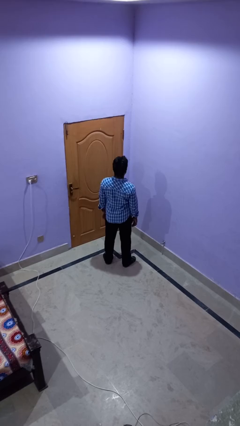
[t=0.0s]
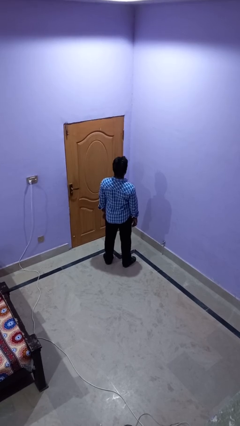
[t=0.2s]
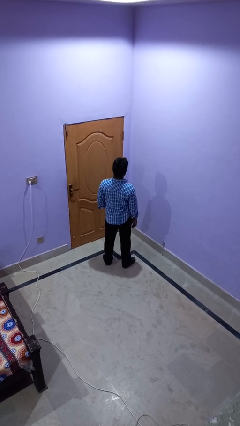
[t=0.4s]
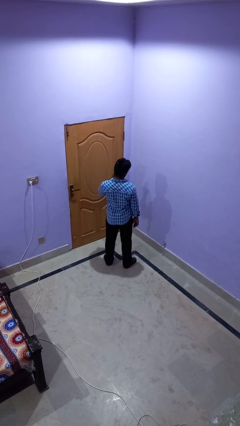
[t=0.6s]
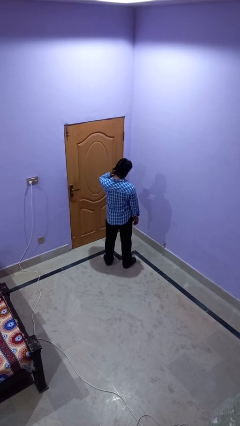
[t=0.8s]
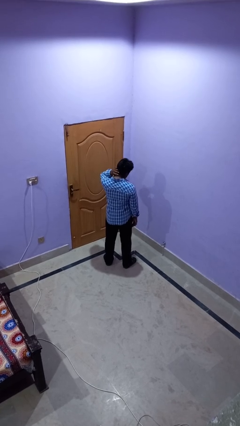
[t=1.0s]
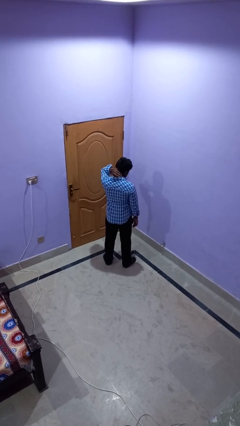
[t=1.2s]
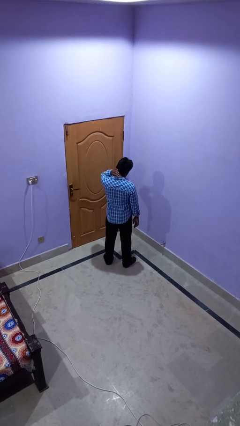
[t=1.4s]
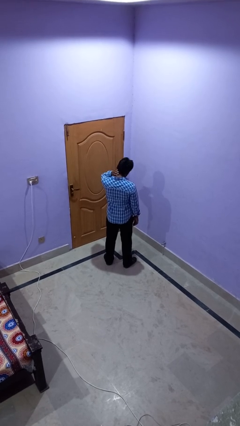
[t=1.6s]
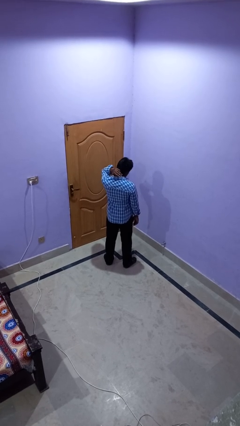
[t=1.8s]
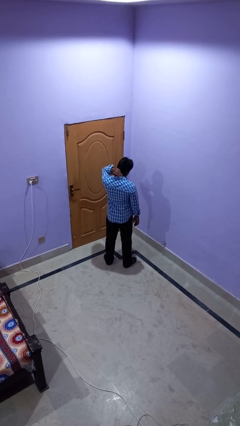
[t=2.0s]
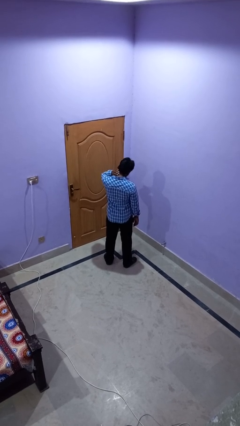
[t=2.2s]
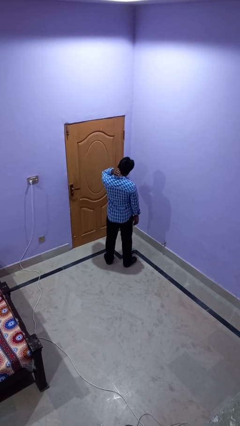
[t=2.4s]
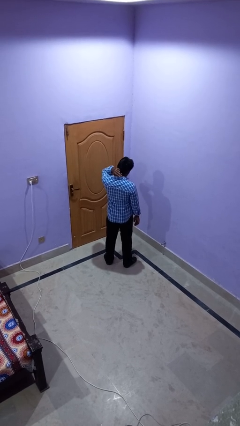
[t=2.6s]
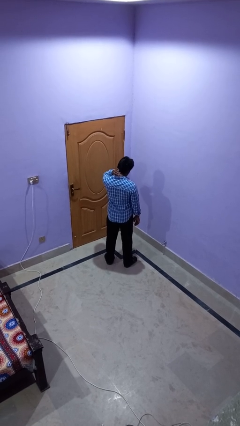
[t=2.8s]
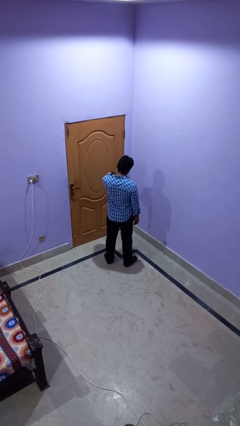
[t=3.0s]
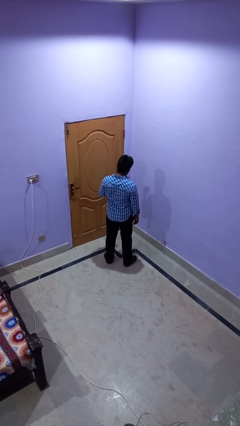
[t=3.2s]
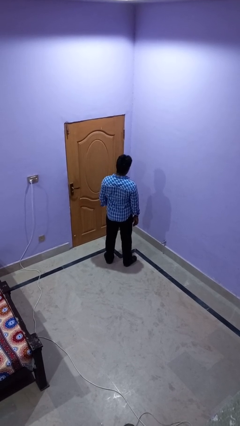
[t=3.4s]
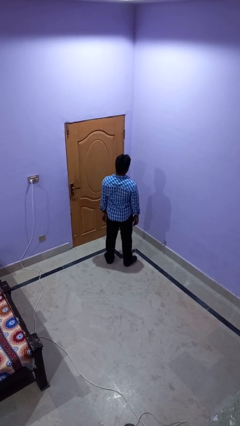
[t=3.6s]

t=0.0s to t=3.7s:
person rubs neck

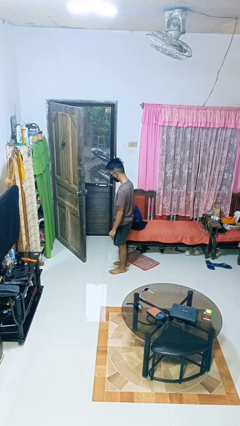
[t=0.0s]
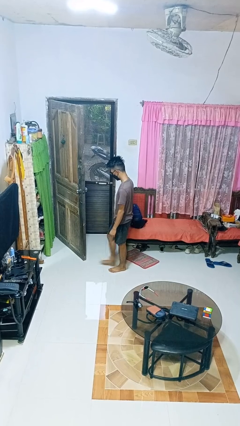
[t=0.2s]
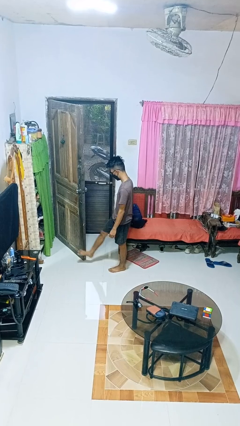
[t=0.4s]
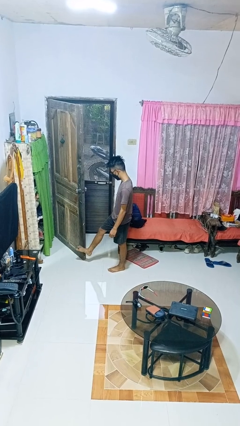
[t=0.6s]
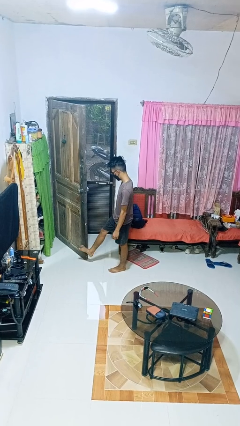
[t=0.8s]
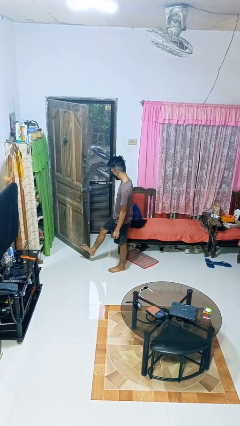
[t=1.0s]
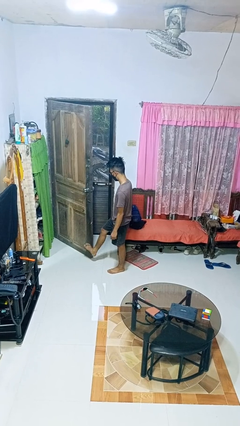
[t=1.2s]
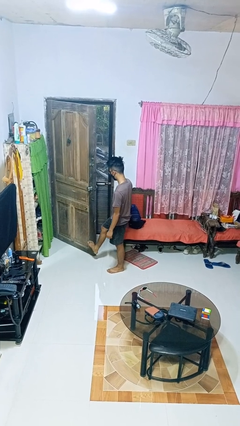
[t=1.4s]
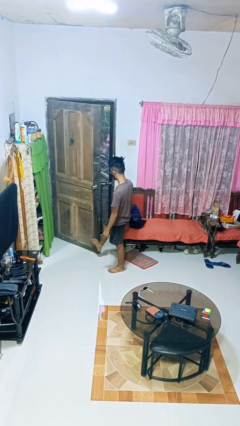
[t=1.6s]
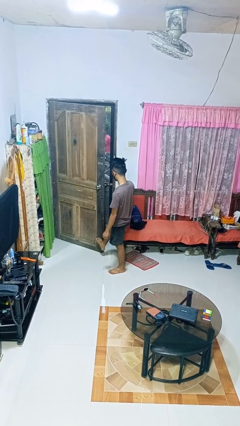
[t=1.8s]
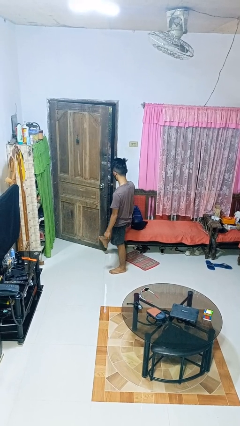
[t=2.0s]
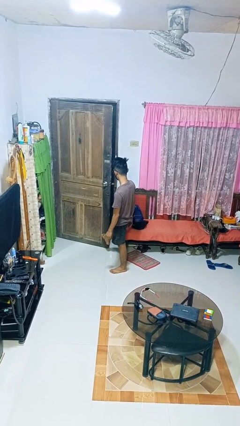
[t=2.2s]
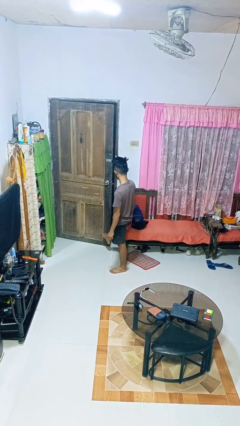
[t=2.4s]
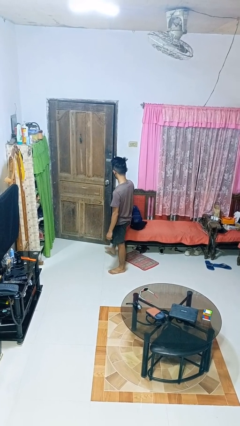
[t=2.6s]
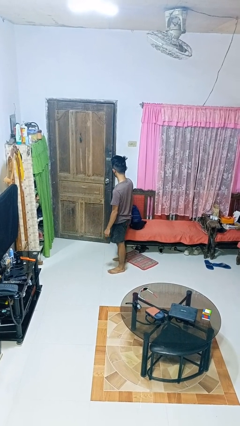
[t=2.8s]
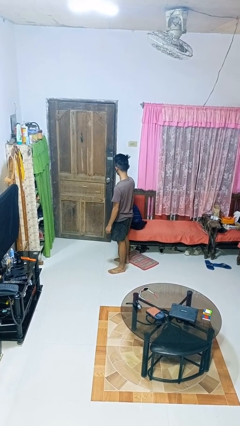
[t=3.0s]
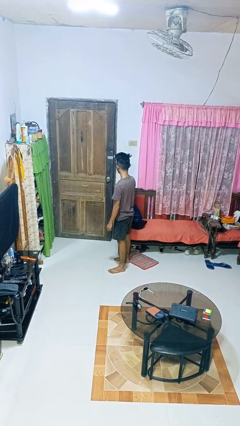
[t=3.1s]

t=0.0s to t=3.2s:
person closes door with foot

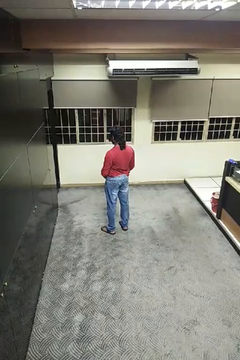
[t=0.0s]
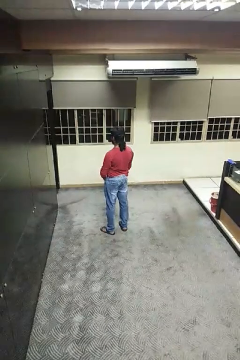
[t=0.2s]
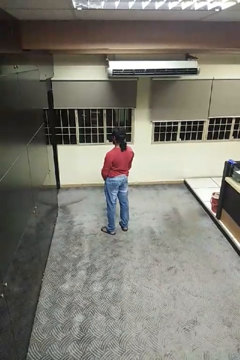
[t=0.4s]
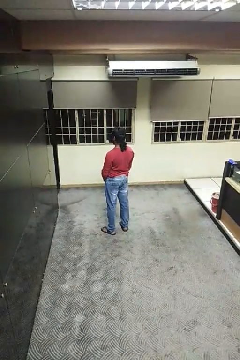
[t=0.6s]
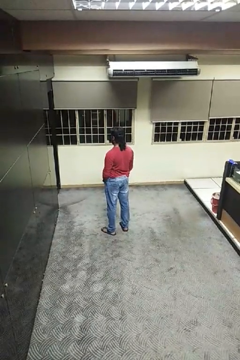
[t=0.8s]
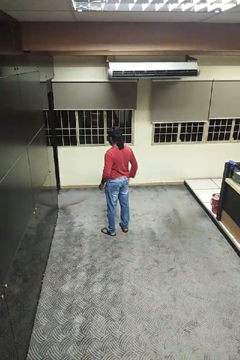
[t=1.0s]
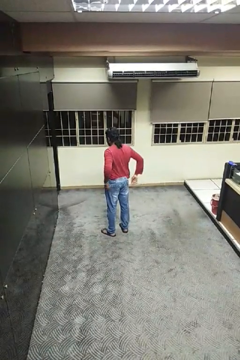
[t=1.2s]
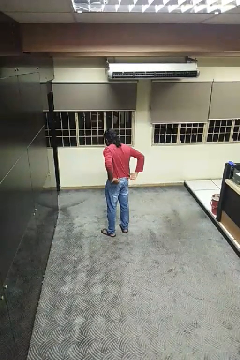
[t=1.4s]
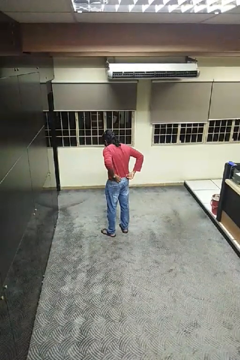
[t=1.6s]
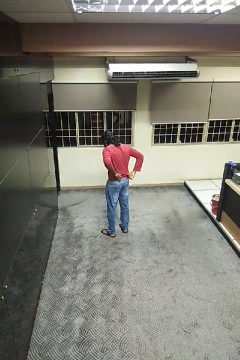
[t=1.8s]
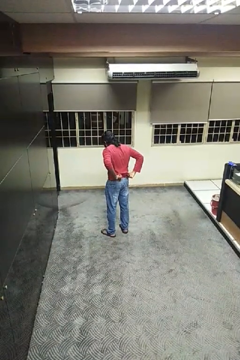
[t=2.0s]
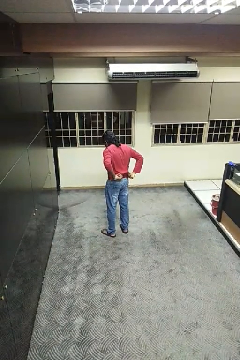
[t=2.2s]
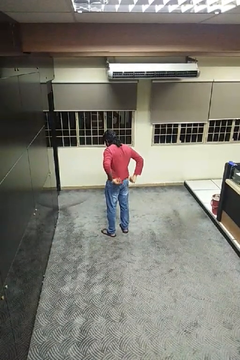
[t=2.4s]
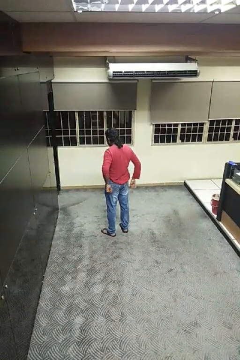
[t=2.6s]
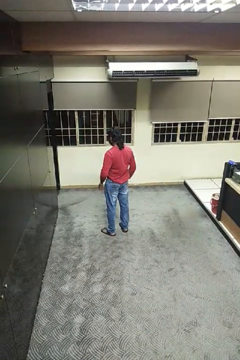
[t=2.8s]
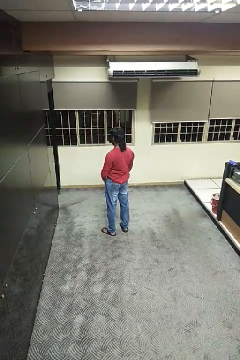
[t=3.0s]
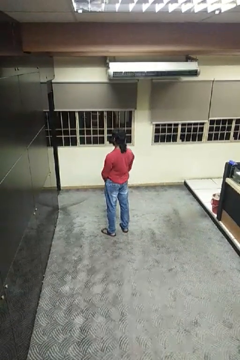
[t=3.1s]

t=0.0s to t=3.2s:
person untucks shirt

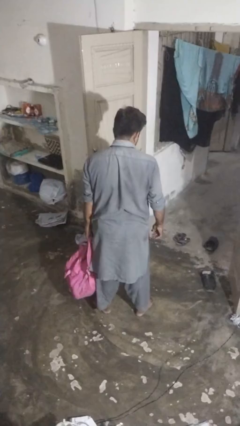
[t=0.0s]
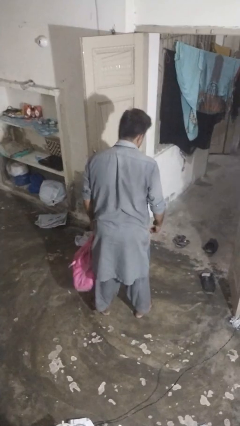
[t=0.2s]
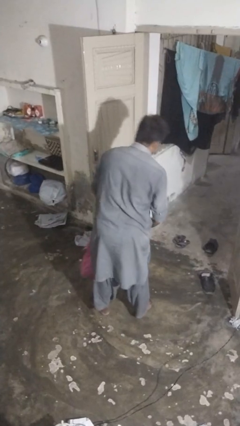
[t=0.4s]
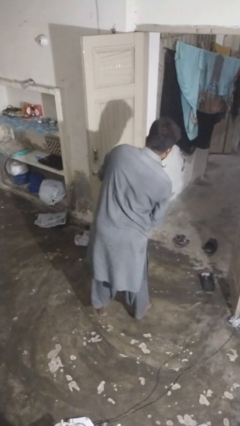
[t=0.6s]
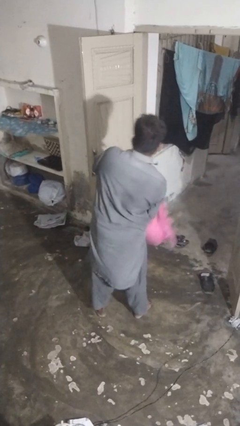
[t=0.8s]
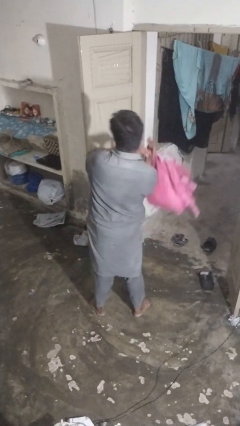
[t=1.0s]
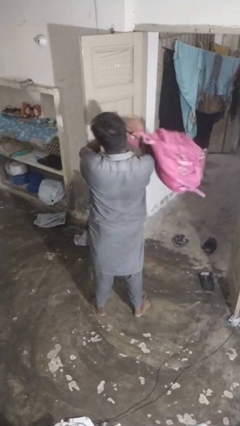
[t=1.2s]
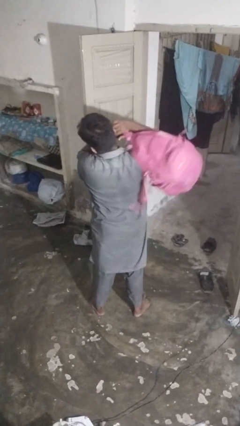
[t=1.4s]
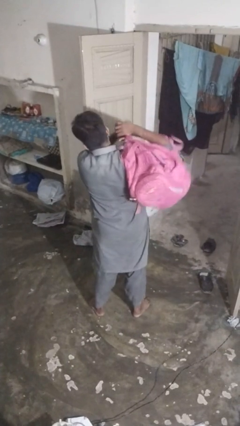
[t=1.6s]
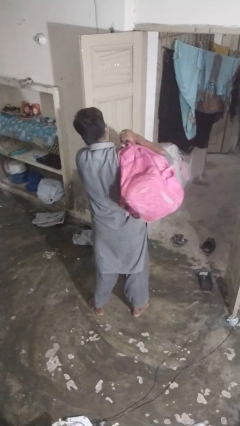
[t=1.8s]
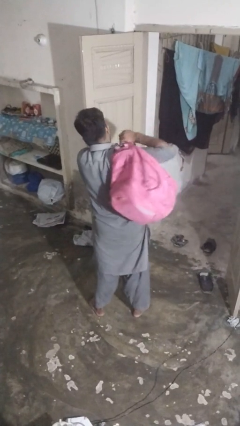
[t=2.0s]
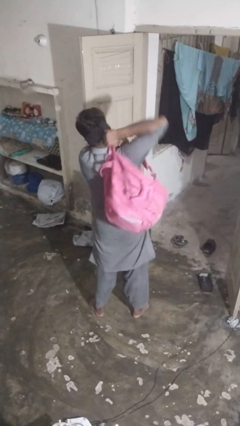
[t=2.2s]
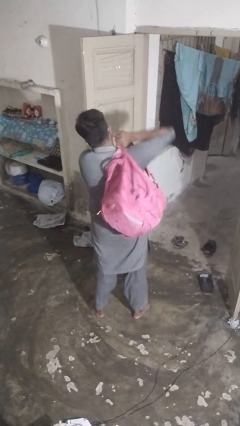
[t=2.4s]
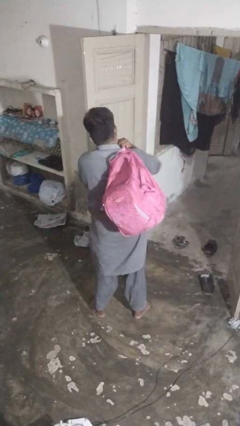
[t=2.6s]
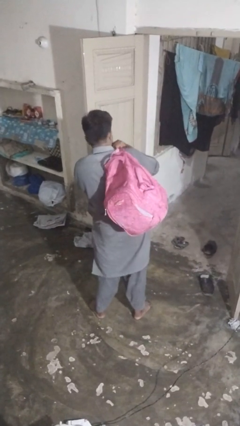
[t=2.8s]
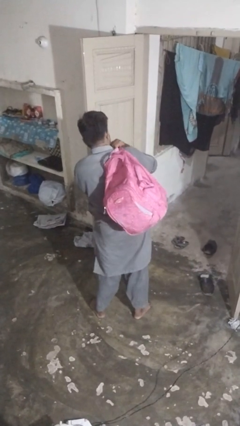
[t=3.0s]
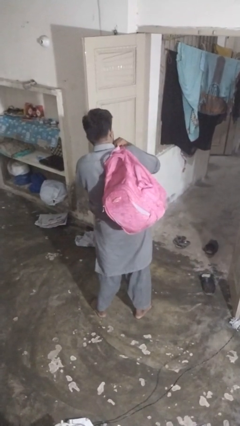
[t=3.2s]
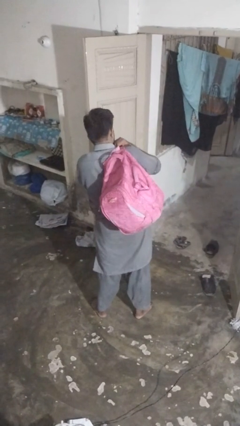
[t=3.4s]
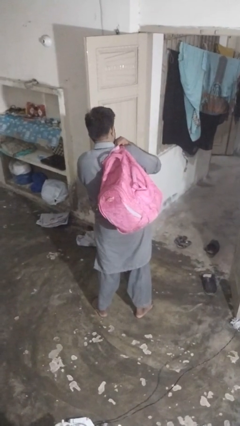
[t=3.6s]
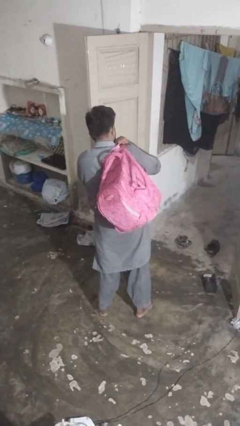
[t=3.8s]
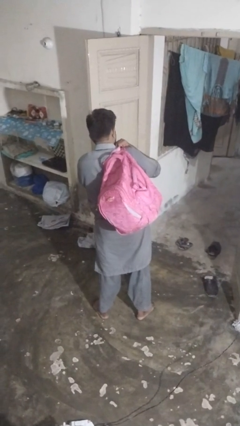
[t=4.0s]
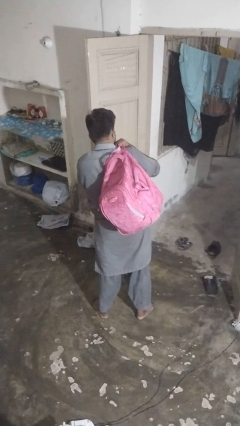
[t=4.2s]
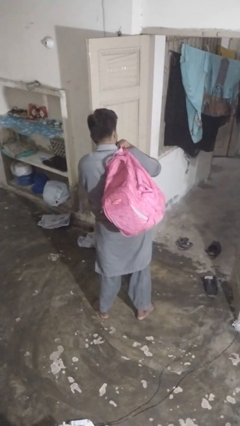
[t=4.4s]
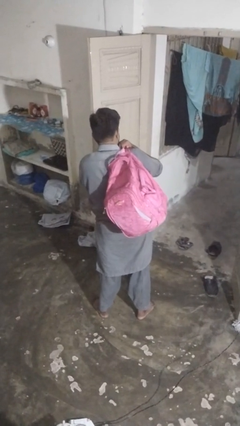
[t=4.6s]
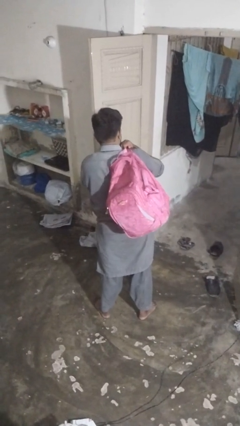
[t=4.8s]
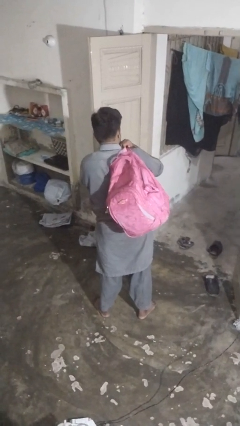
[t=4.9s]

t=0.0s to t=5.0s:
person puts on backpack

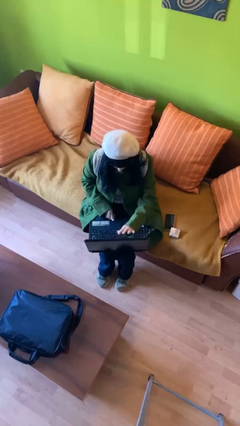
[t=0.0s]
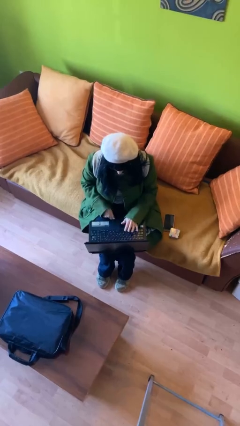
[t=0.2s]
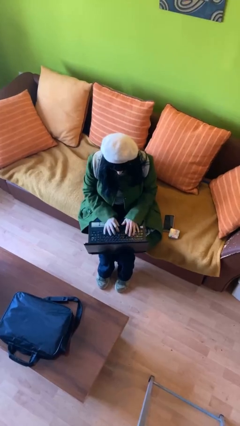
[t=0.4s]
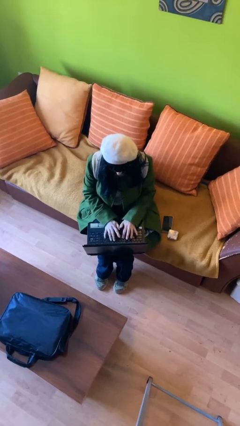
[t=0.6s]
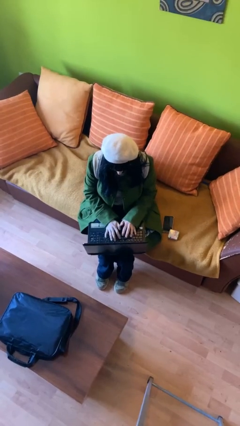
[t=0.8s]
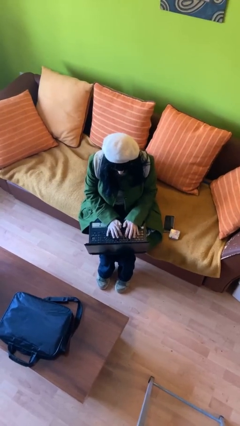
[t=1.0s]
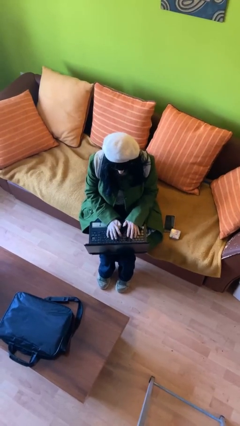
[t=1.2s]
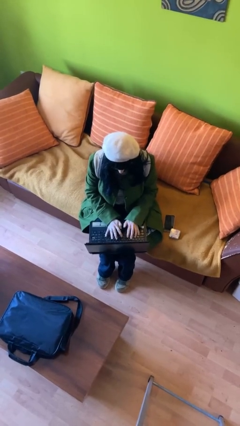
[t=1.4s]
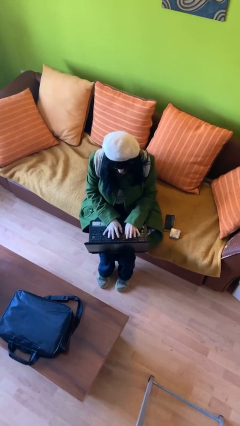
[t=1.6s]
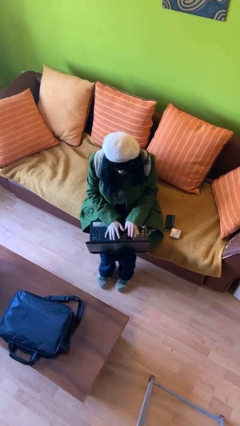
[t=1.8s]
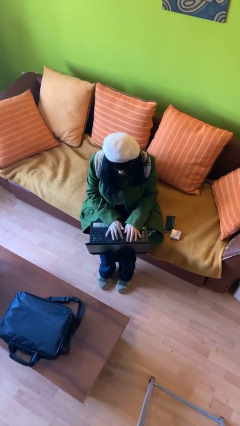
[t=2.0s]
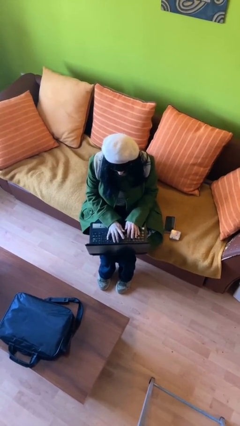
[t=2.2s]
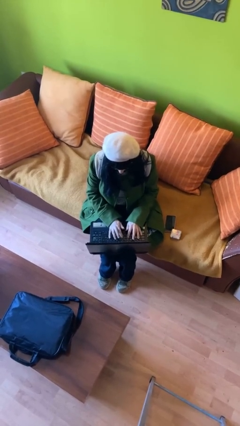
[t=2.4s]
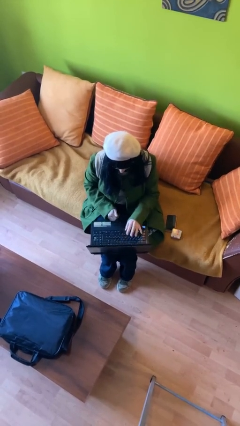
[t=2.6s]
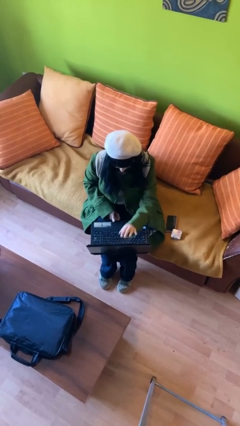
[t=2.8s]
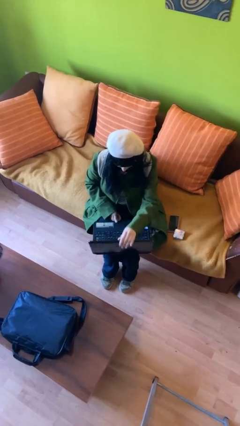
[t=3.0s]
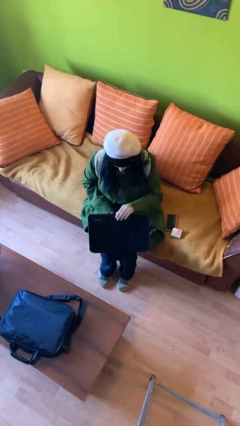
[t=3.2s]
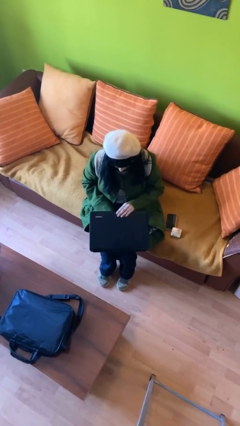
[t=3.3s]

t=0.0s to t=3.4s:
person interacts with laptop
